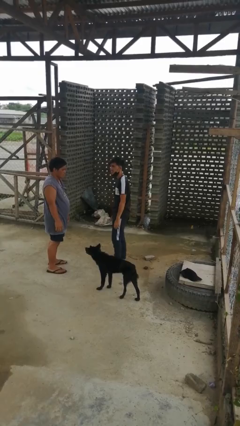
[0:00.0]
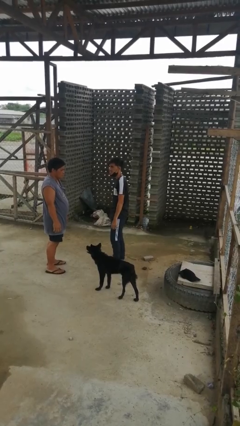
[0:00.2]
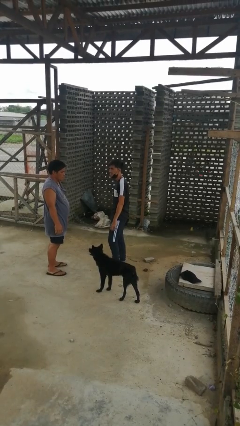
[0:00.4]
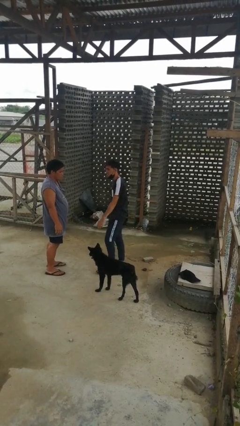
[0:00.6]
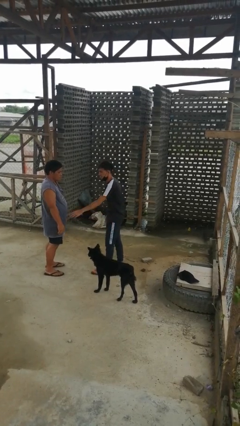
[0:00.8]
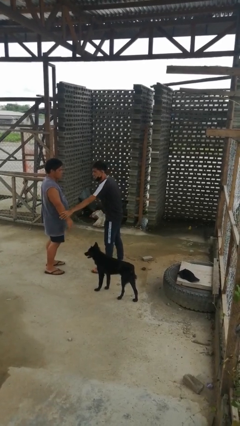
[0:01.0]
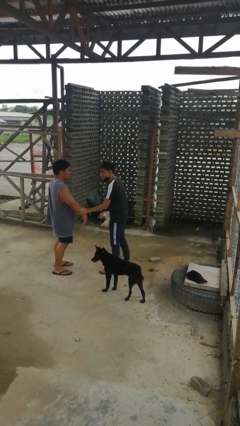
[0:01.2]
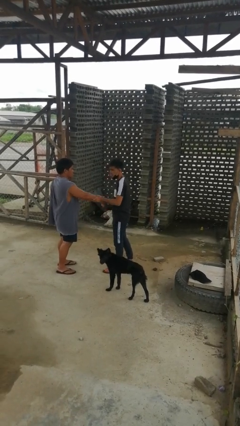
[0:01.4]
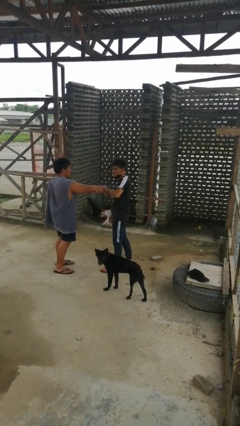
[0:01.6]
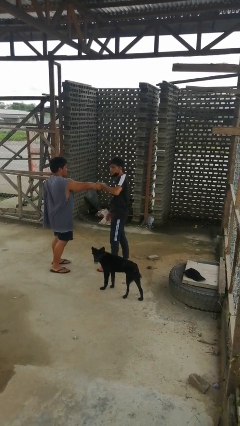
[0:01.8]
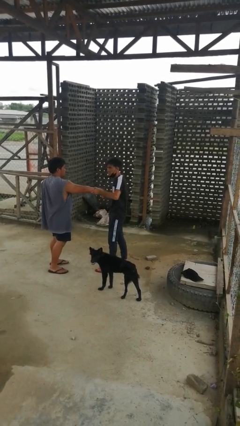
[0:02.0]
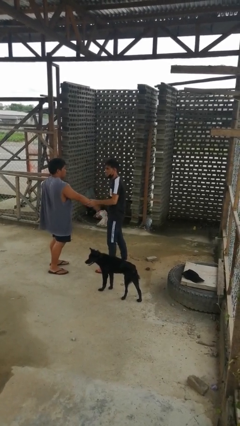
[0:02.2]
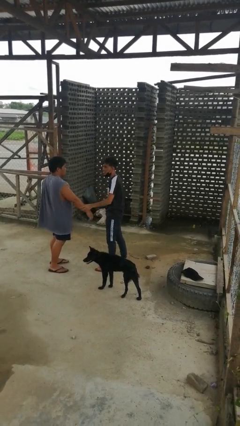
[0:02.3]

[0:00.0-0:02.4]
person grabs person by forearm

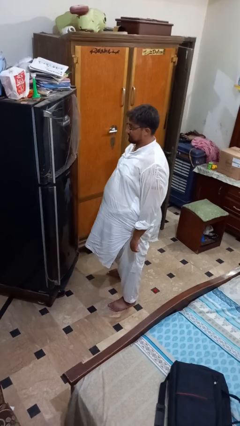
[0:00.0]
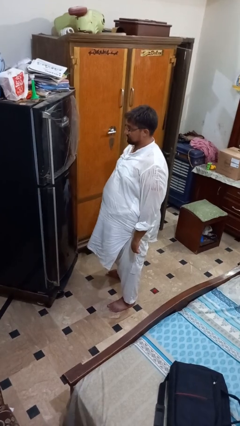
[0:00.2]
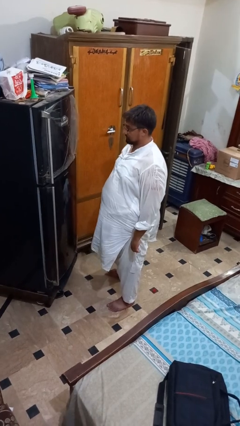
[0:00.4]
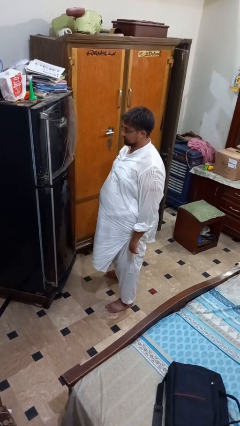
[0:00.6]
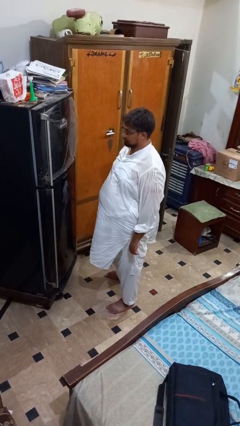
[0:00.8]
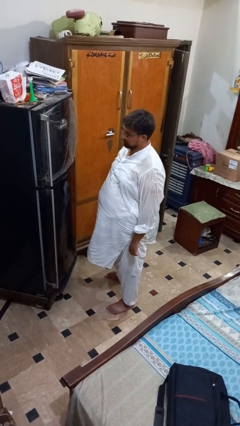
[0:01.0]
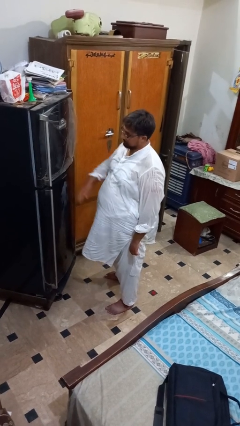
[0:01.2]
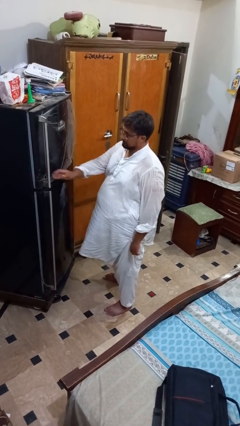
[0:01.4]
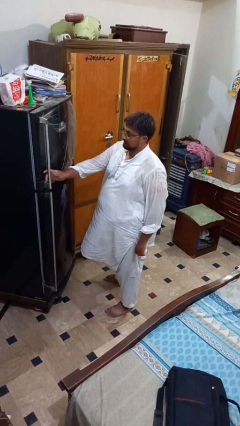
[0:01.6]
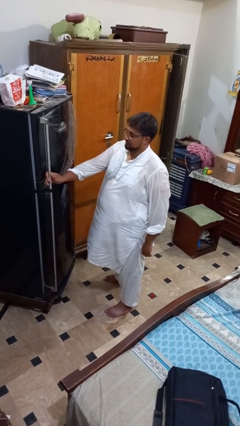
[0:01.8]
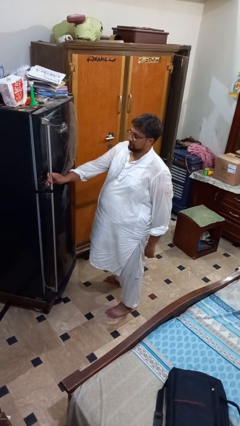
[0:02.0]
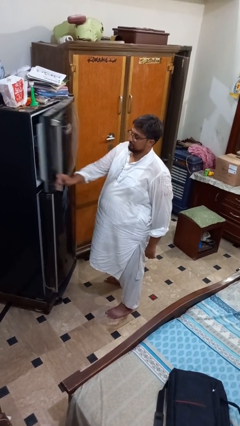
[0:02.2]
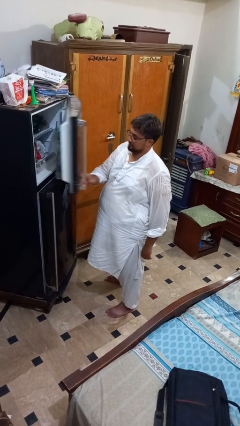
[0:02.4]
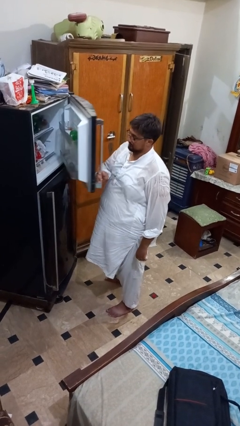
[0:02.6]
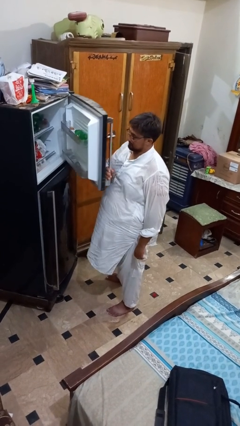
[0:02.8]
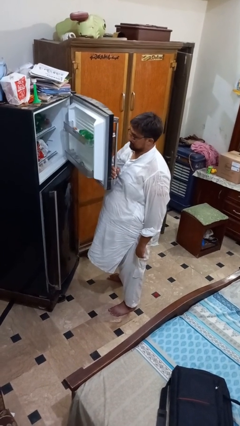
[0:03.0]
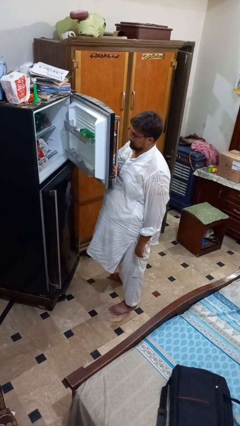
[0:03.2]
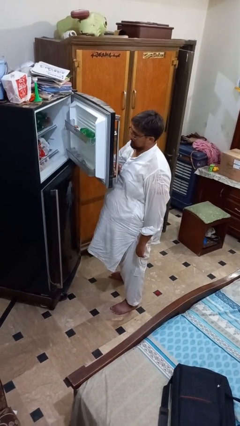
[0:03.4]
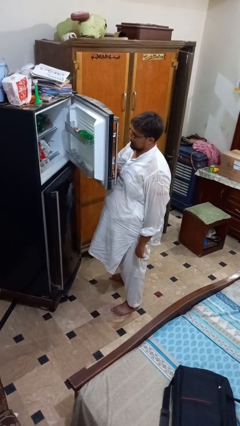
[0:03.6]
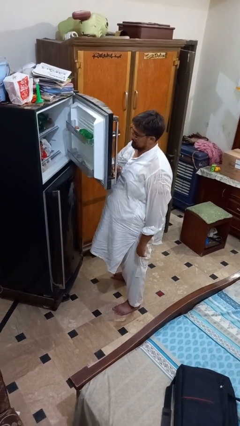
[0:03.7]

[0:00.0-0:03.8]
person opens refrigerator

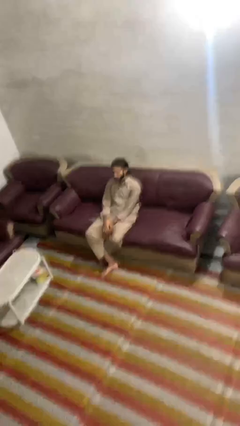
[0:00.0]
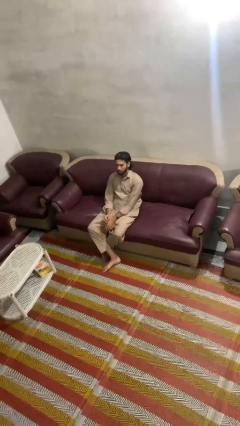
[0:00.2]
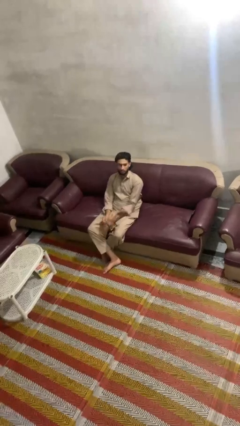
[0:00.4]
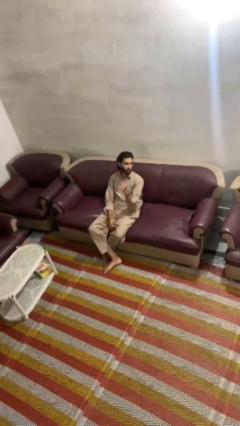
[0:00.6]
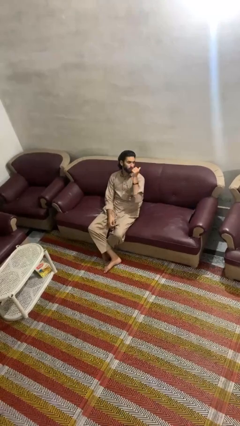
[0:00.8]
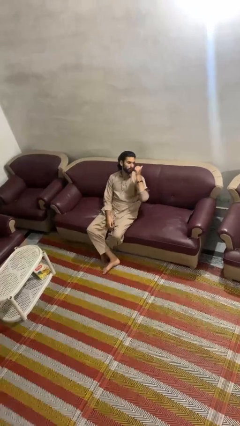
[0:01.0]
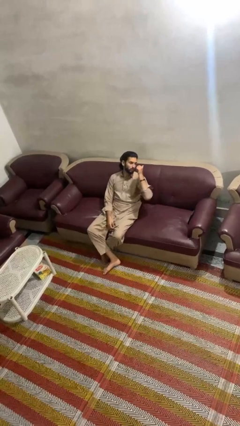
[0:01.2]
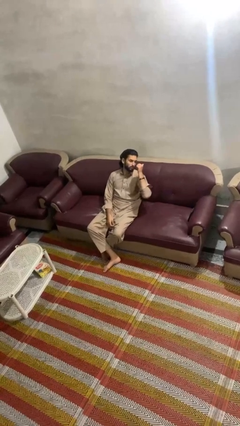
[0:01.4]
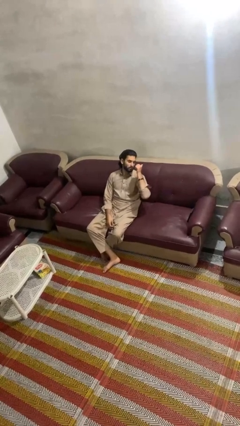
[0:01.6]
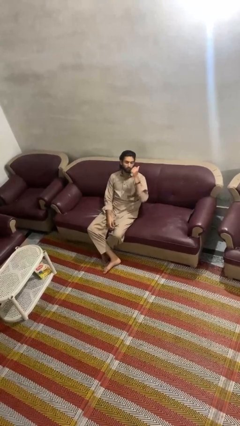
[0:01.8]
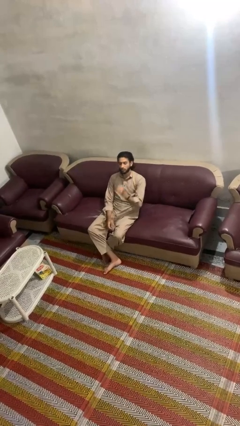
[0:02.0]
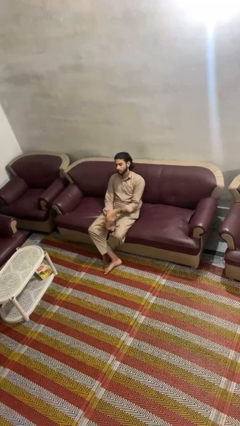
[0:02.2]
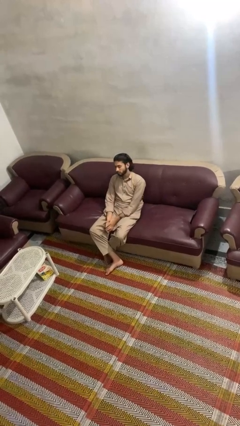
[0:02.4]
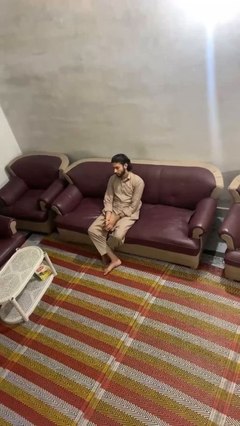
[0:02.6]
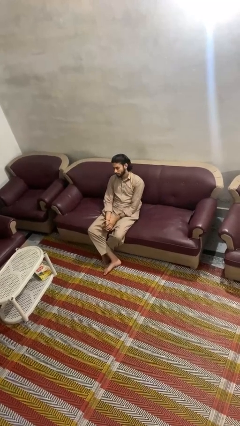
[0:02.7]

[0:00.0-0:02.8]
person gestures behind me

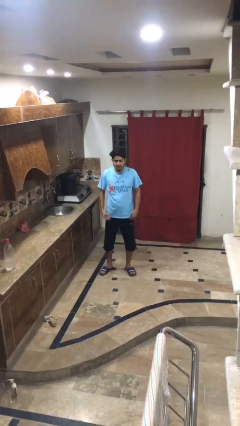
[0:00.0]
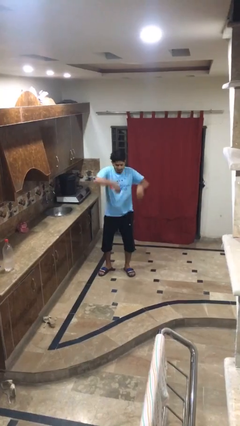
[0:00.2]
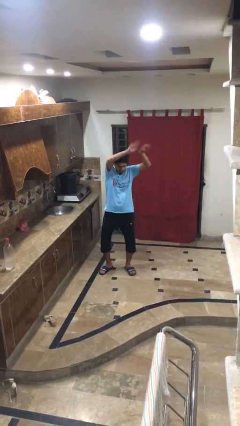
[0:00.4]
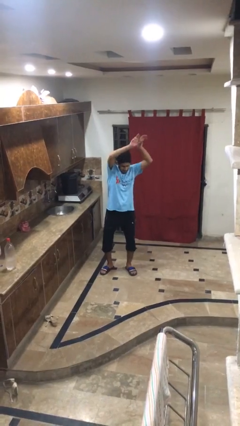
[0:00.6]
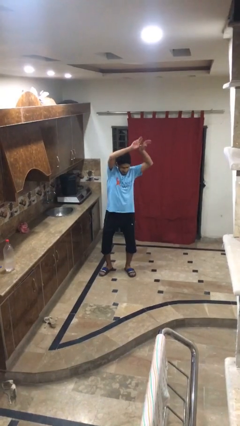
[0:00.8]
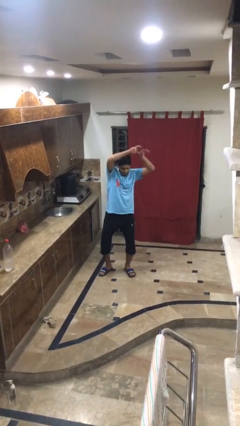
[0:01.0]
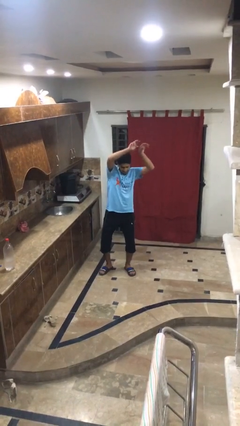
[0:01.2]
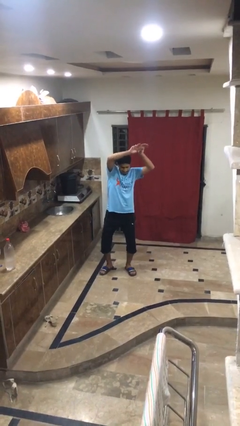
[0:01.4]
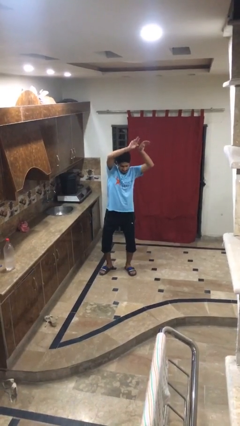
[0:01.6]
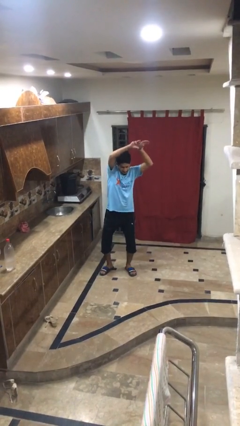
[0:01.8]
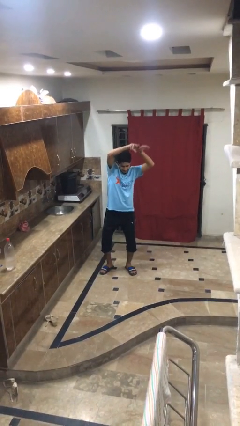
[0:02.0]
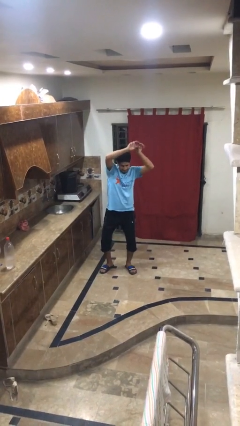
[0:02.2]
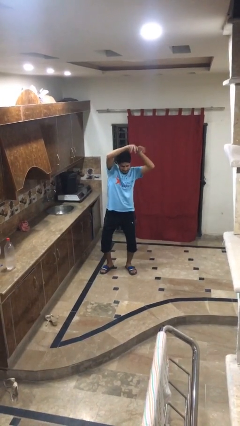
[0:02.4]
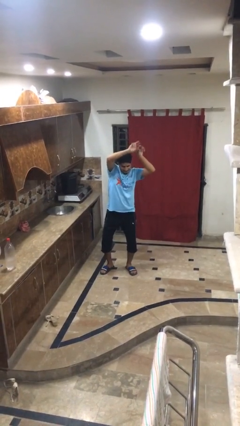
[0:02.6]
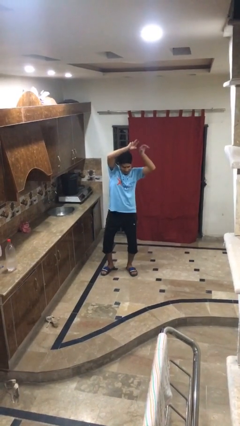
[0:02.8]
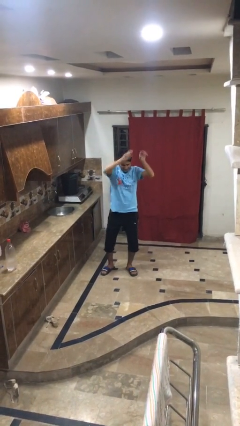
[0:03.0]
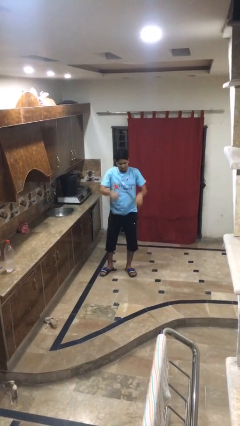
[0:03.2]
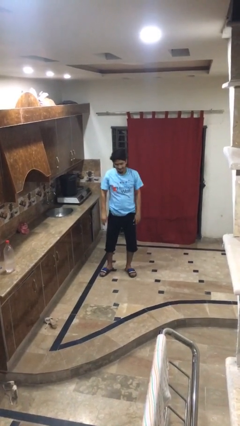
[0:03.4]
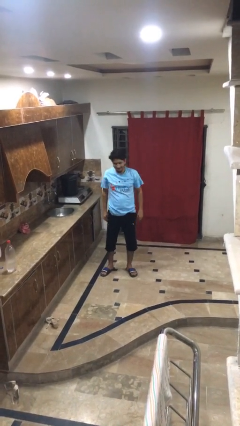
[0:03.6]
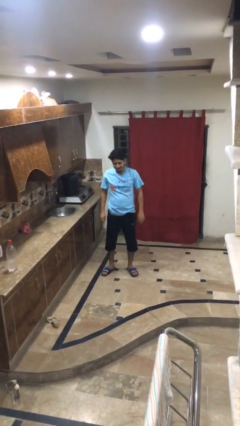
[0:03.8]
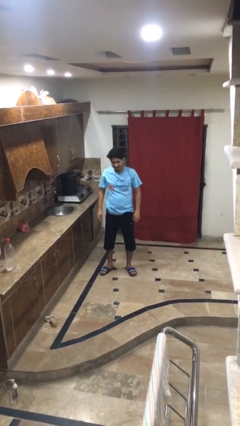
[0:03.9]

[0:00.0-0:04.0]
person dances in place

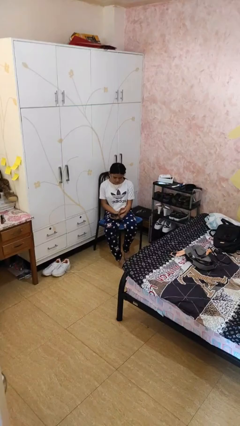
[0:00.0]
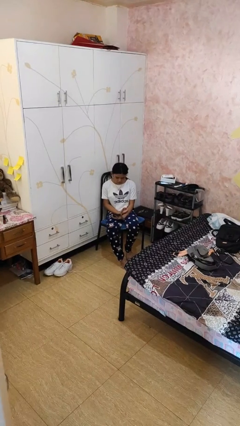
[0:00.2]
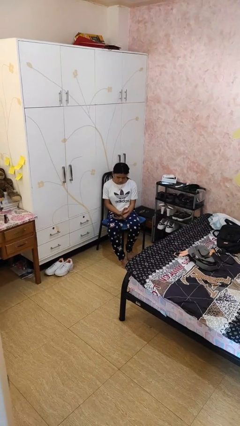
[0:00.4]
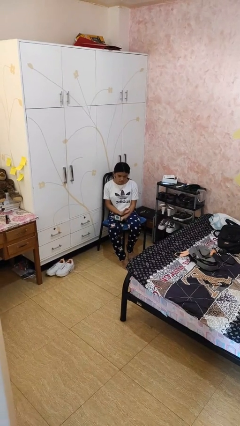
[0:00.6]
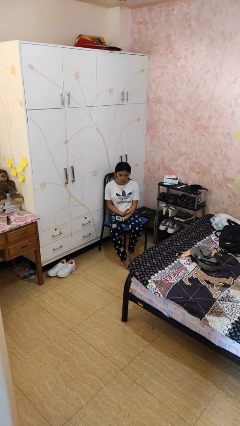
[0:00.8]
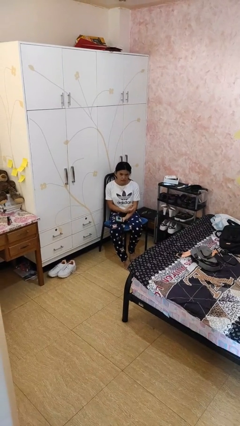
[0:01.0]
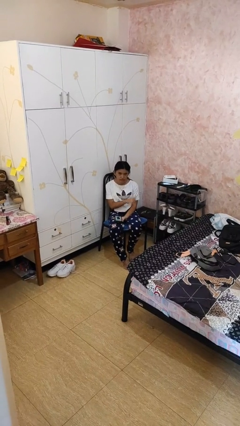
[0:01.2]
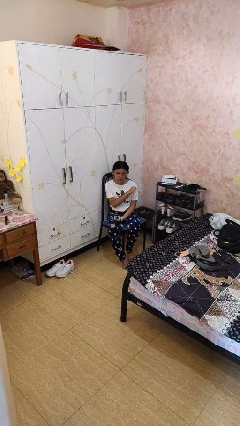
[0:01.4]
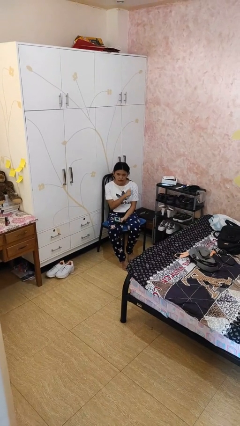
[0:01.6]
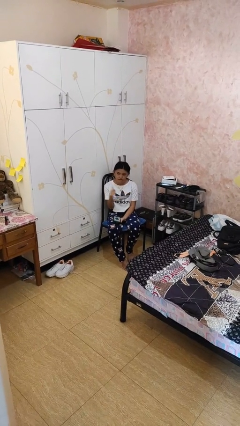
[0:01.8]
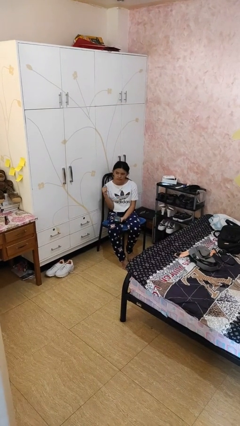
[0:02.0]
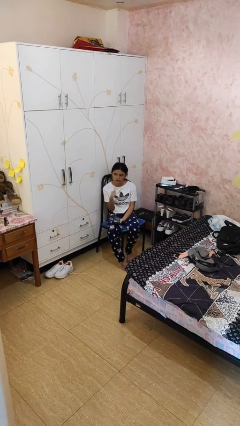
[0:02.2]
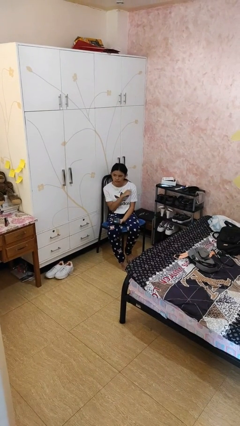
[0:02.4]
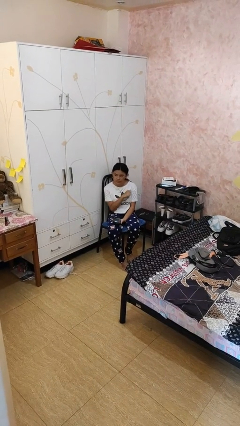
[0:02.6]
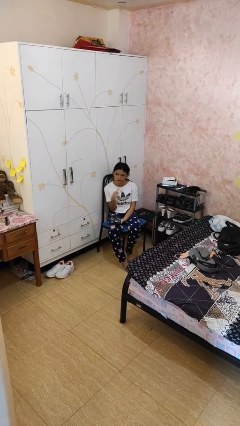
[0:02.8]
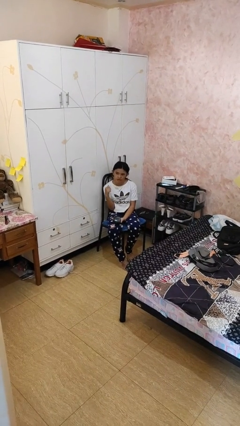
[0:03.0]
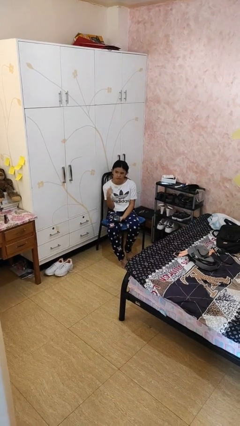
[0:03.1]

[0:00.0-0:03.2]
person gestures cut

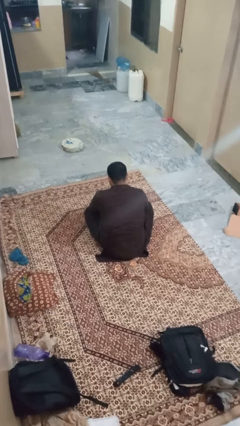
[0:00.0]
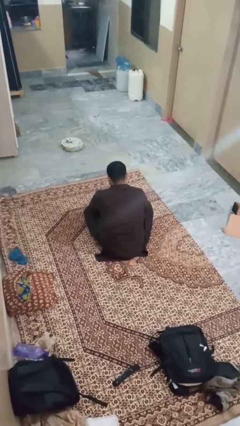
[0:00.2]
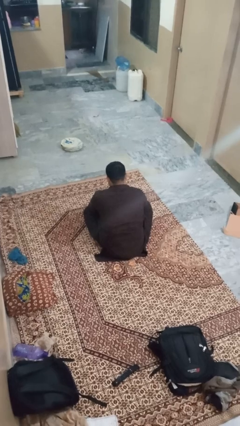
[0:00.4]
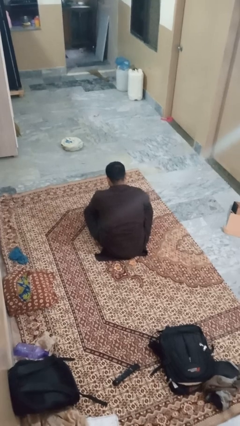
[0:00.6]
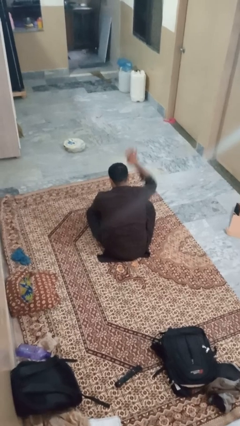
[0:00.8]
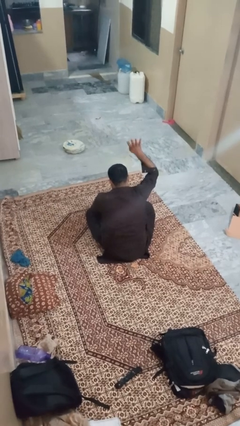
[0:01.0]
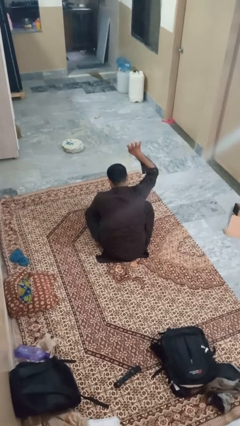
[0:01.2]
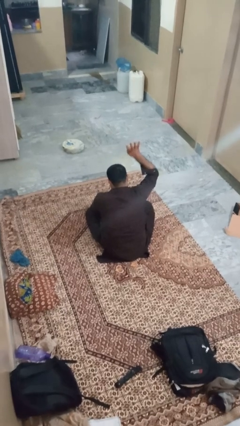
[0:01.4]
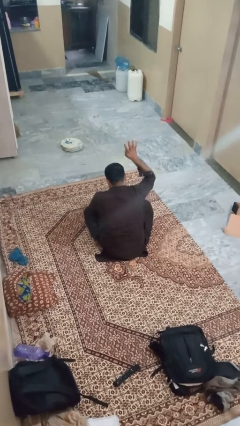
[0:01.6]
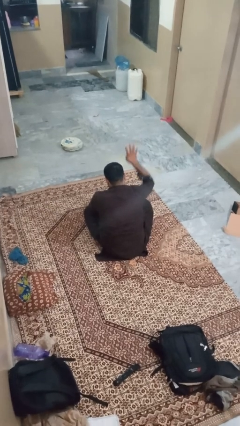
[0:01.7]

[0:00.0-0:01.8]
person gestures number four
